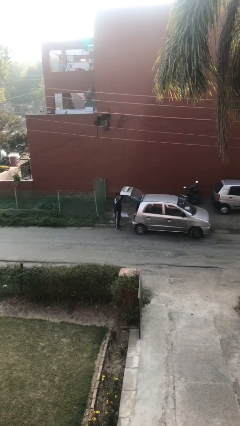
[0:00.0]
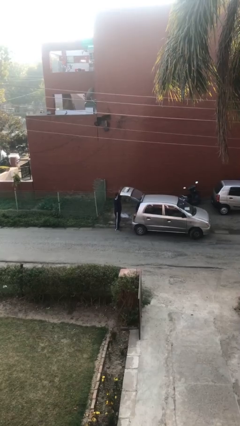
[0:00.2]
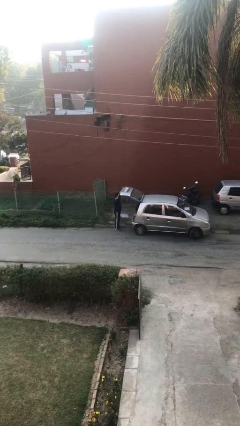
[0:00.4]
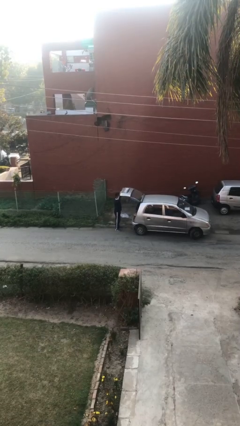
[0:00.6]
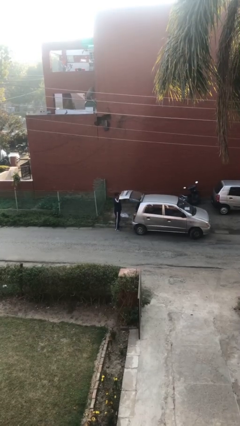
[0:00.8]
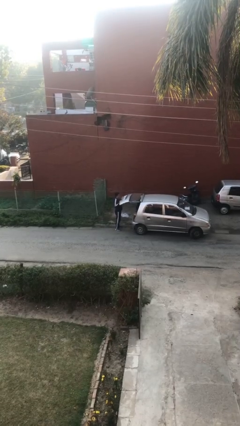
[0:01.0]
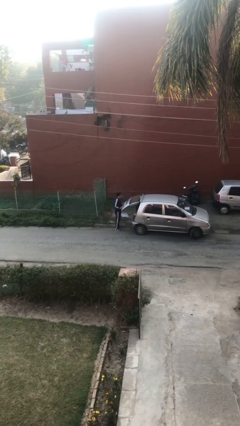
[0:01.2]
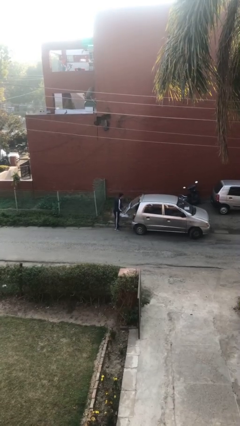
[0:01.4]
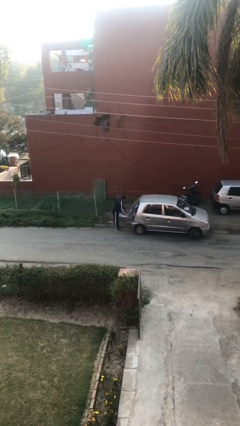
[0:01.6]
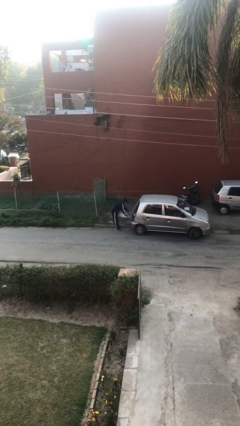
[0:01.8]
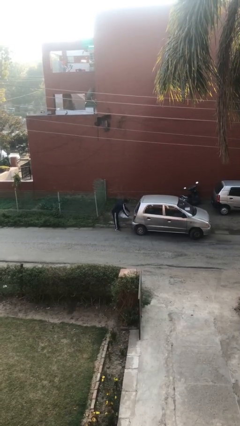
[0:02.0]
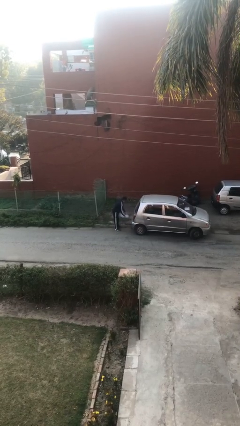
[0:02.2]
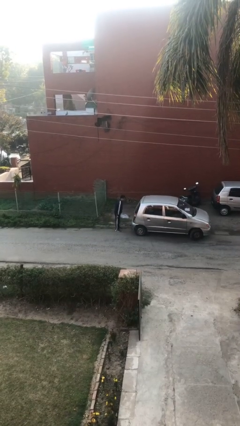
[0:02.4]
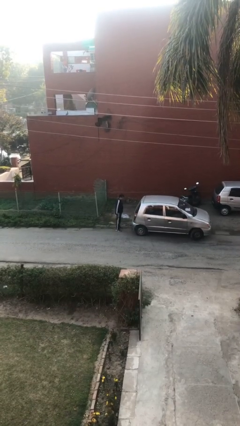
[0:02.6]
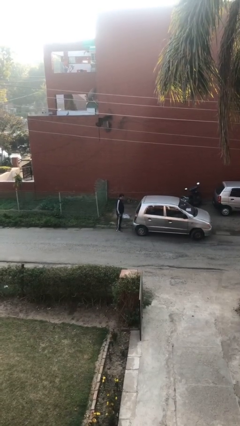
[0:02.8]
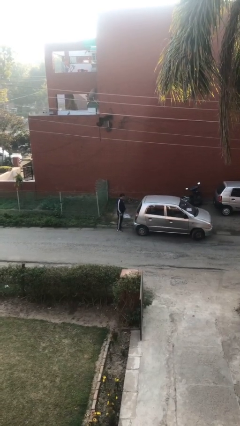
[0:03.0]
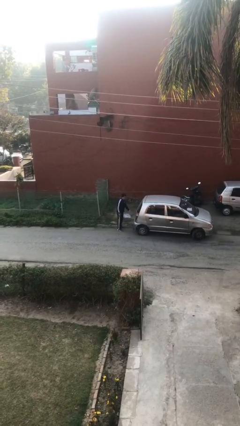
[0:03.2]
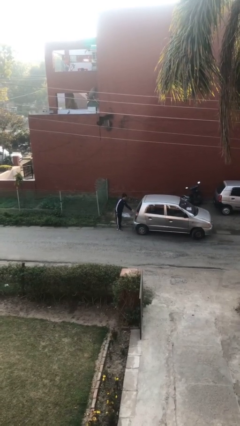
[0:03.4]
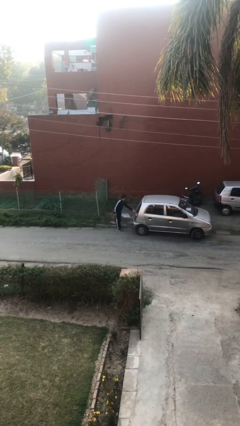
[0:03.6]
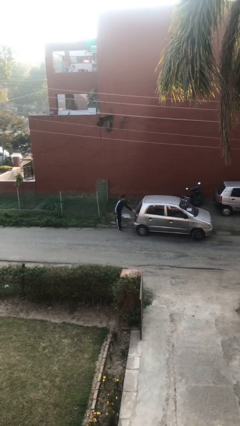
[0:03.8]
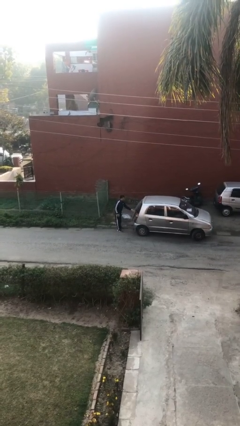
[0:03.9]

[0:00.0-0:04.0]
person closes car trunk

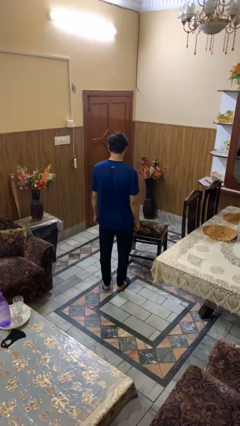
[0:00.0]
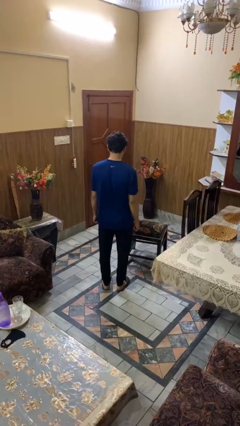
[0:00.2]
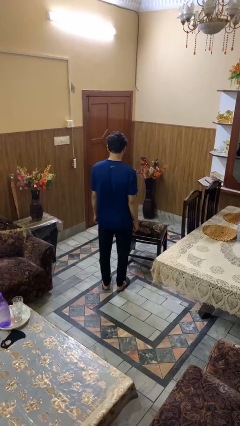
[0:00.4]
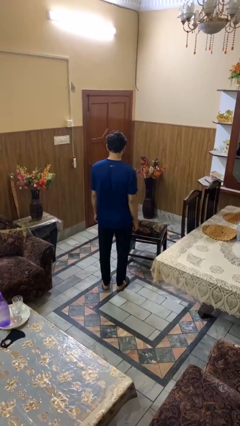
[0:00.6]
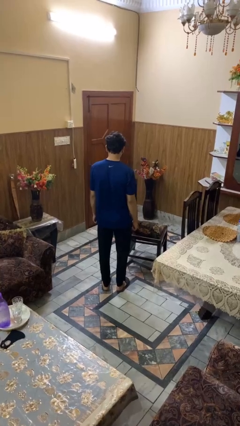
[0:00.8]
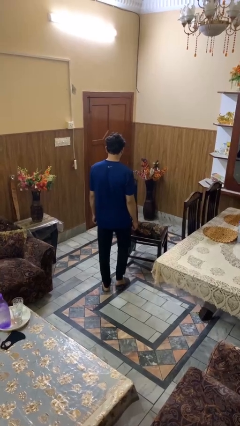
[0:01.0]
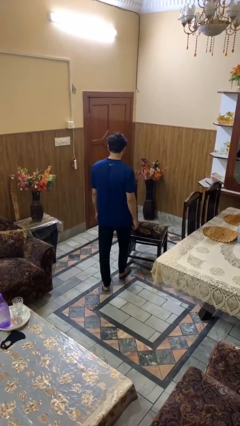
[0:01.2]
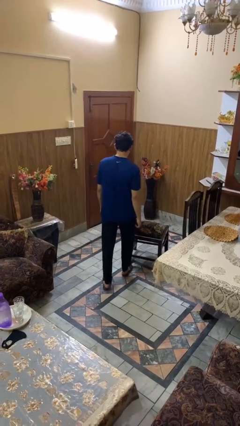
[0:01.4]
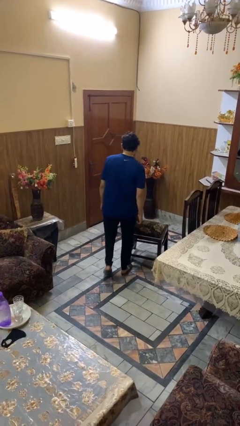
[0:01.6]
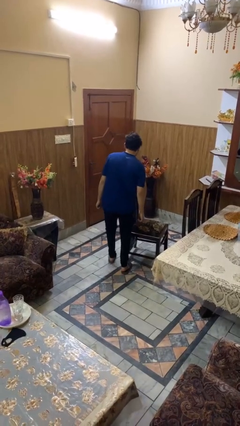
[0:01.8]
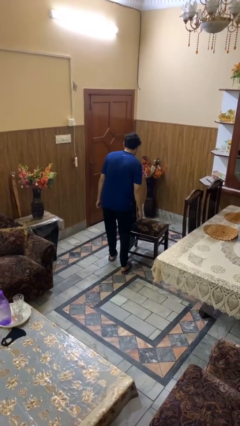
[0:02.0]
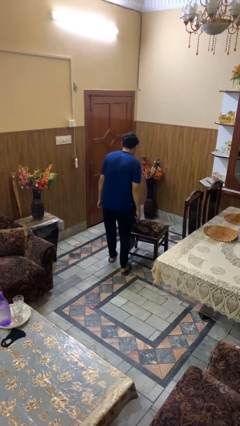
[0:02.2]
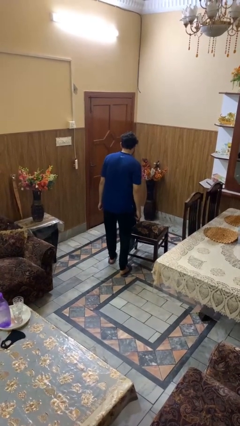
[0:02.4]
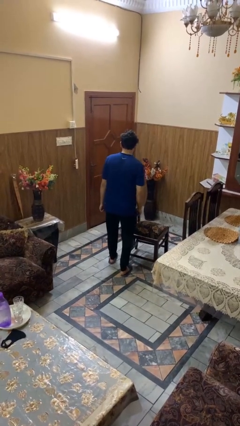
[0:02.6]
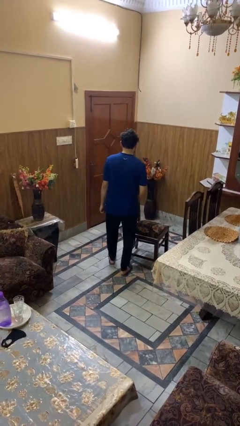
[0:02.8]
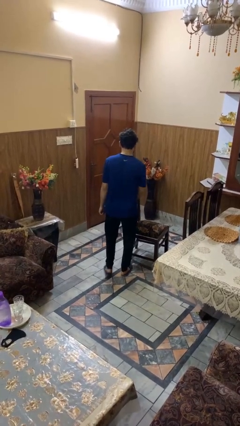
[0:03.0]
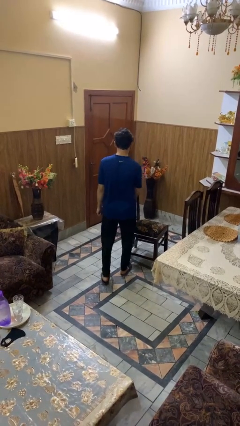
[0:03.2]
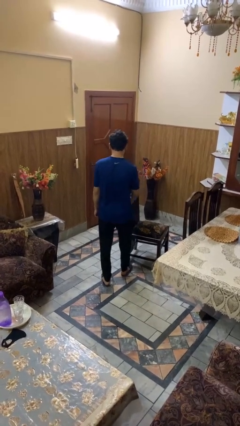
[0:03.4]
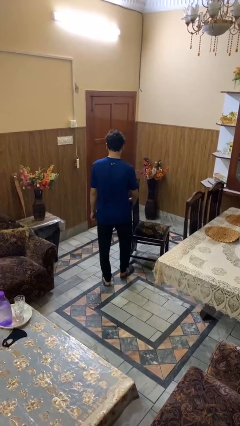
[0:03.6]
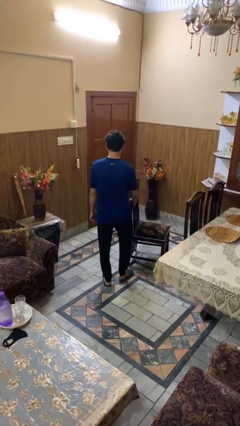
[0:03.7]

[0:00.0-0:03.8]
person stubs toe

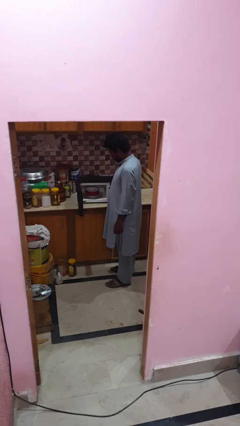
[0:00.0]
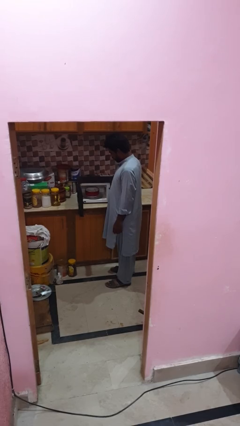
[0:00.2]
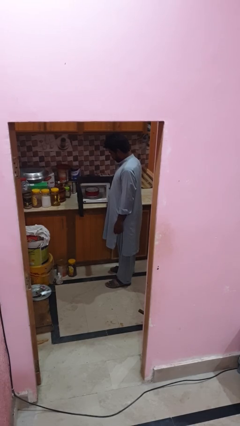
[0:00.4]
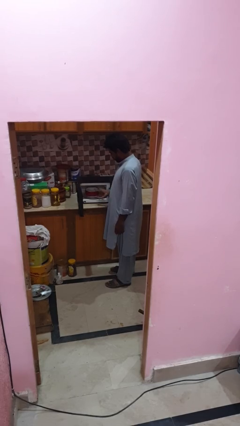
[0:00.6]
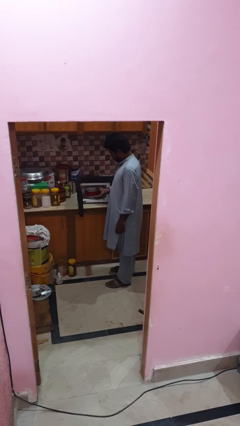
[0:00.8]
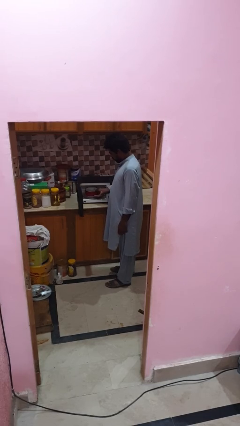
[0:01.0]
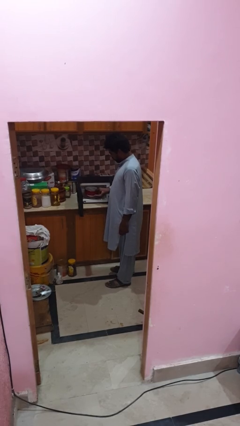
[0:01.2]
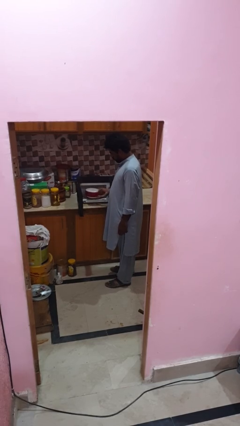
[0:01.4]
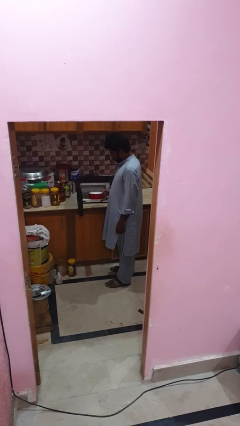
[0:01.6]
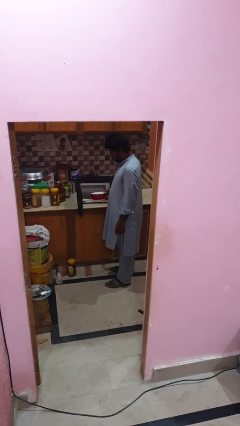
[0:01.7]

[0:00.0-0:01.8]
person takes object from microwave

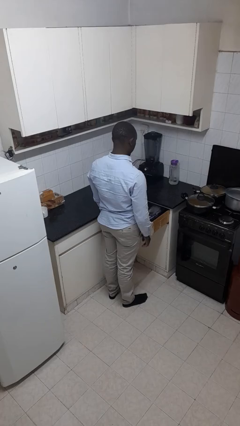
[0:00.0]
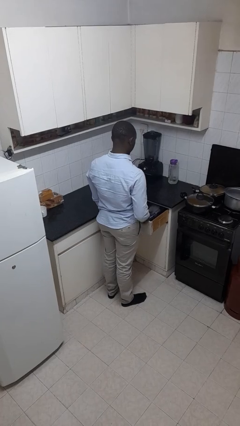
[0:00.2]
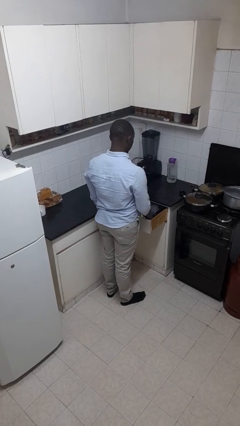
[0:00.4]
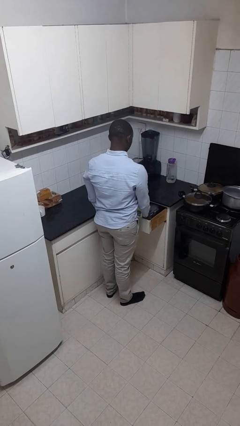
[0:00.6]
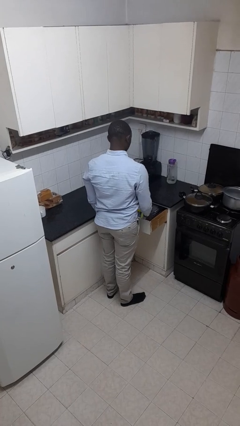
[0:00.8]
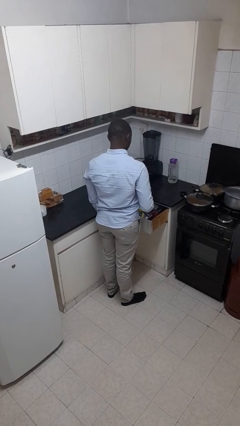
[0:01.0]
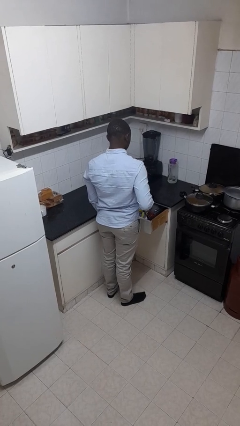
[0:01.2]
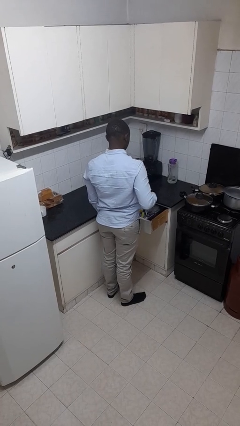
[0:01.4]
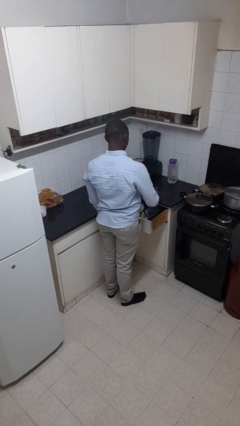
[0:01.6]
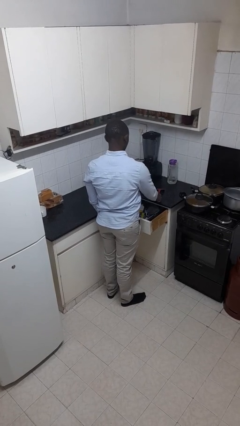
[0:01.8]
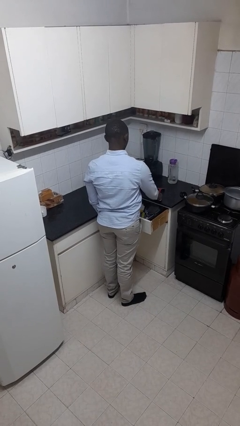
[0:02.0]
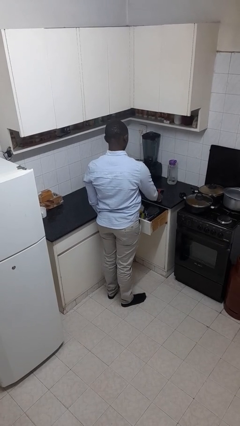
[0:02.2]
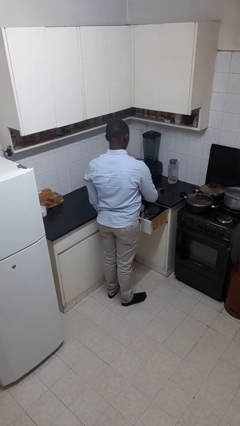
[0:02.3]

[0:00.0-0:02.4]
person takes object from kitchen drawer

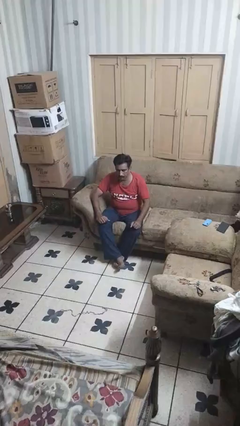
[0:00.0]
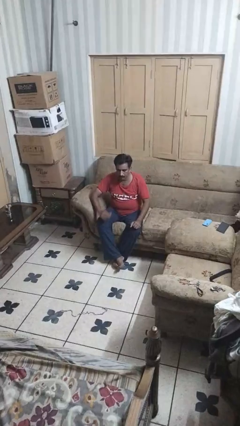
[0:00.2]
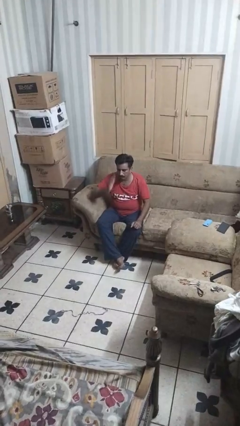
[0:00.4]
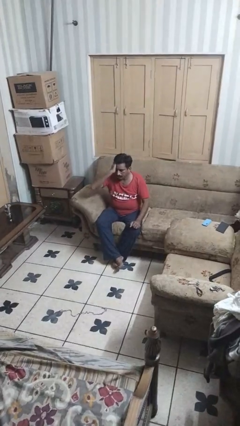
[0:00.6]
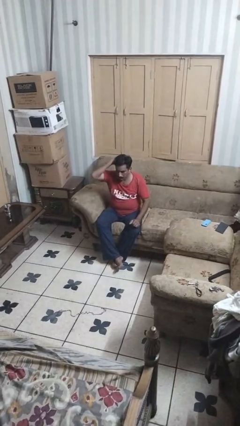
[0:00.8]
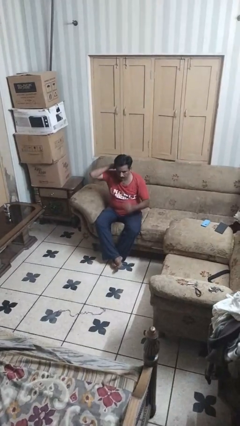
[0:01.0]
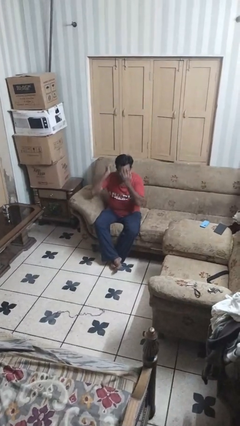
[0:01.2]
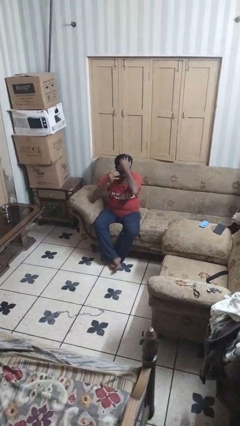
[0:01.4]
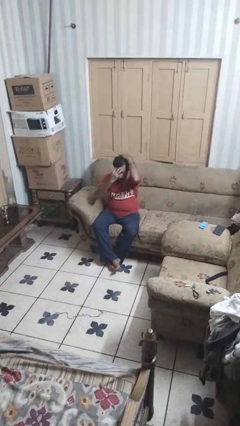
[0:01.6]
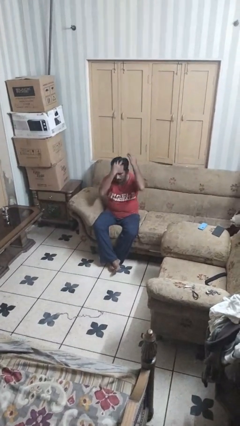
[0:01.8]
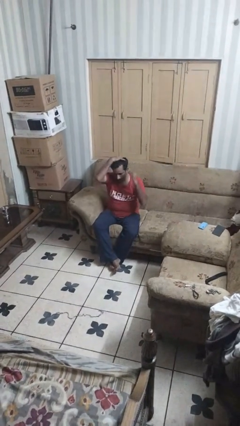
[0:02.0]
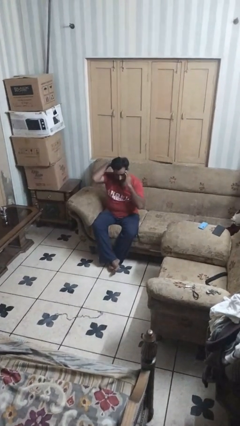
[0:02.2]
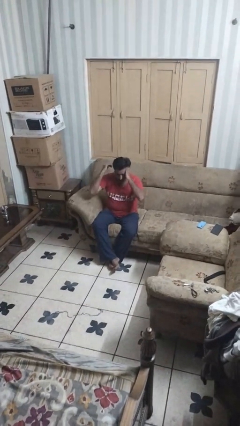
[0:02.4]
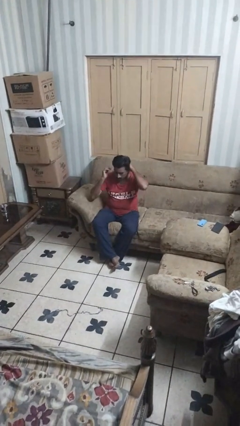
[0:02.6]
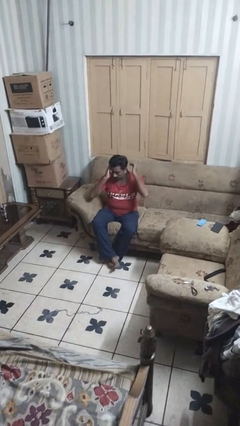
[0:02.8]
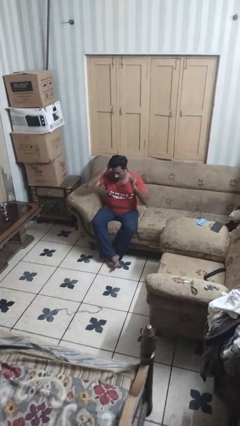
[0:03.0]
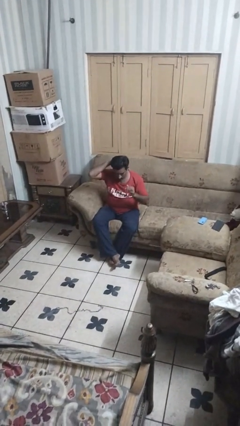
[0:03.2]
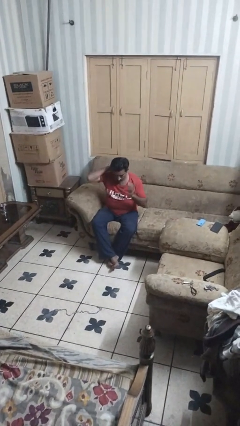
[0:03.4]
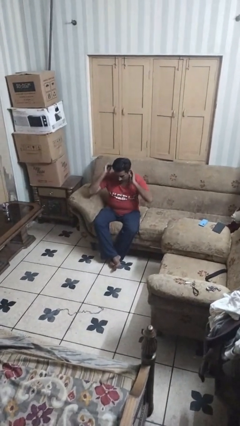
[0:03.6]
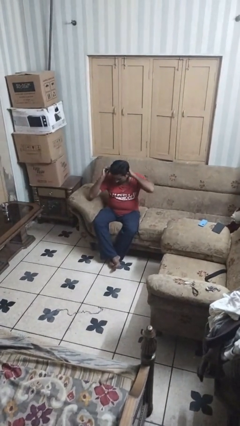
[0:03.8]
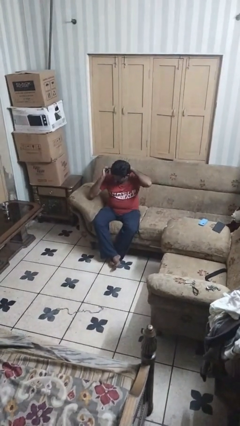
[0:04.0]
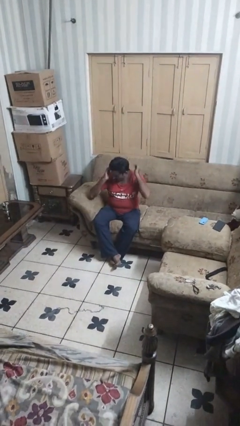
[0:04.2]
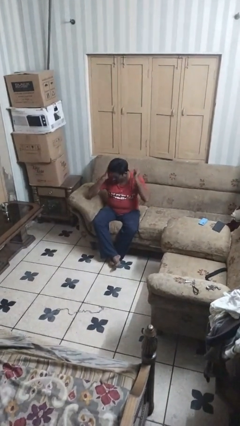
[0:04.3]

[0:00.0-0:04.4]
person strokes hair

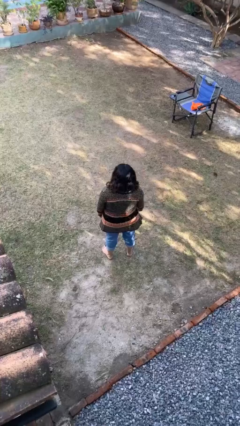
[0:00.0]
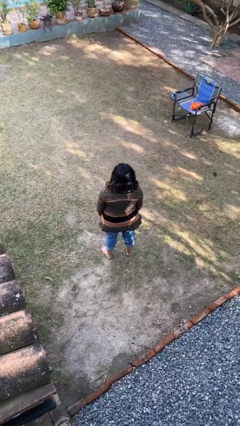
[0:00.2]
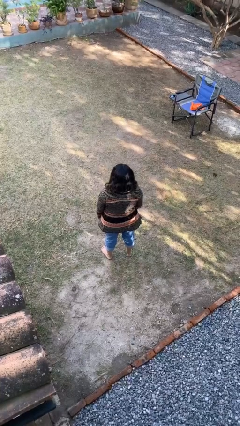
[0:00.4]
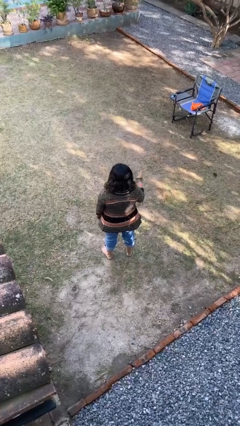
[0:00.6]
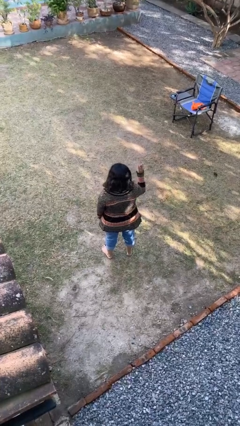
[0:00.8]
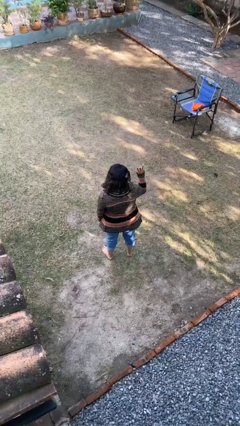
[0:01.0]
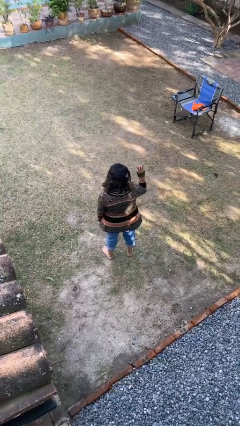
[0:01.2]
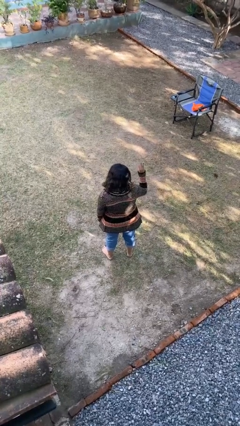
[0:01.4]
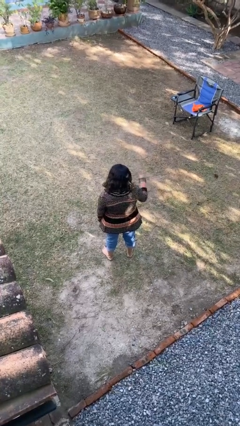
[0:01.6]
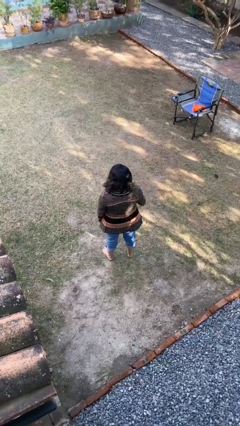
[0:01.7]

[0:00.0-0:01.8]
person gestures number three
